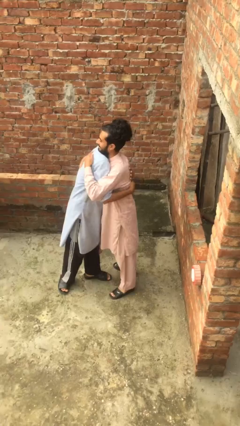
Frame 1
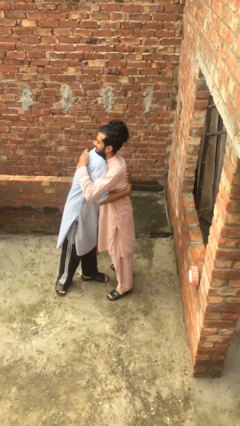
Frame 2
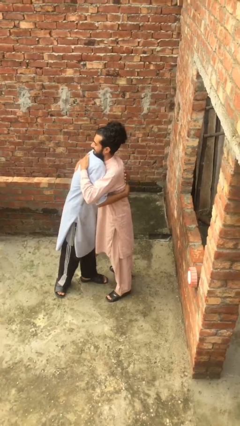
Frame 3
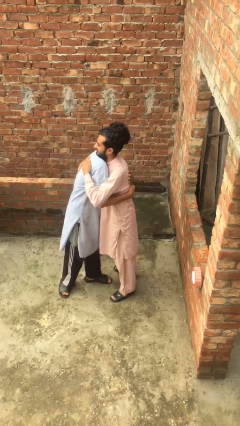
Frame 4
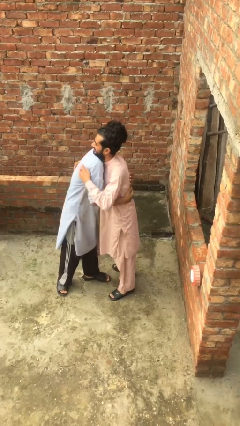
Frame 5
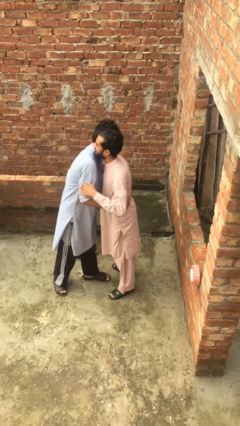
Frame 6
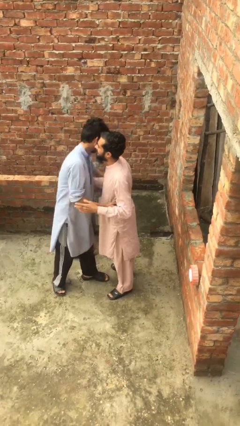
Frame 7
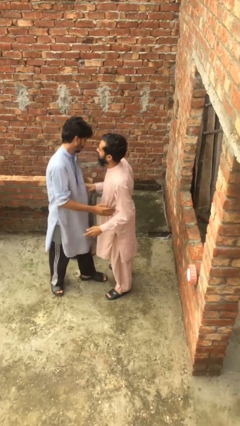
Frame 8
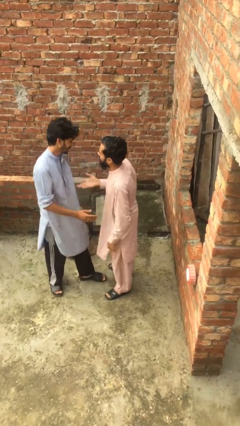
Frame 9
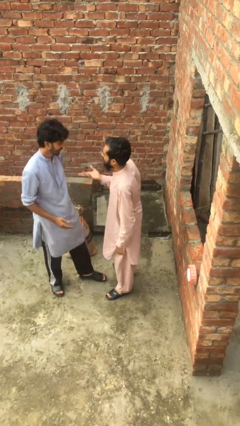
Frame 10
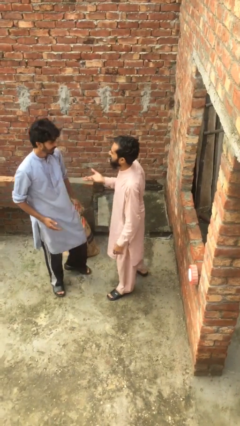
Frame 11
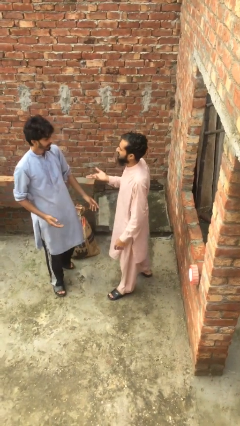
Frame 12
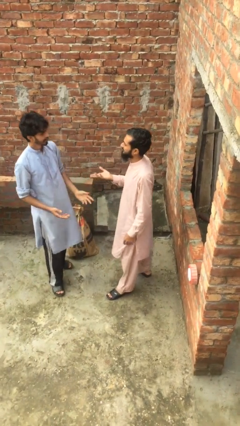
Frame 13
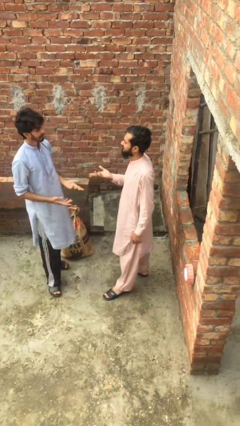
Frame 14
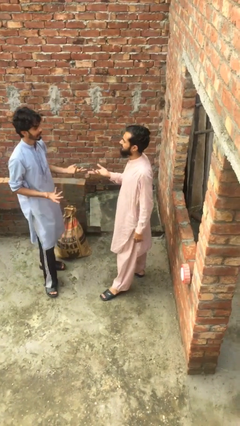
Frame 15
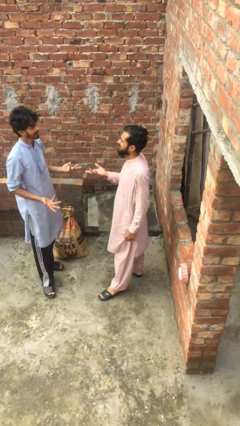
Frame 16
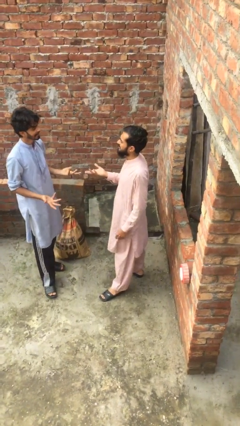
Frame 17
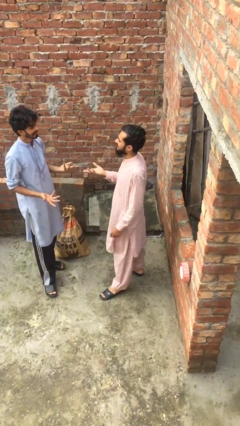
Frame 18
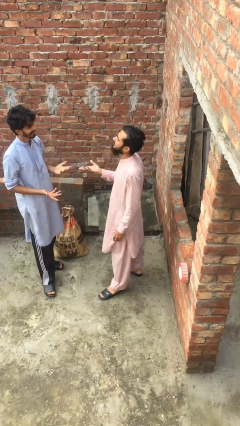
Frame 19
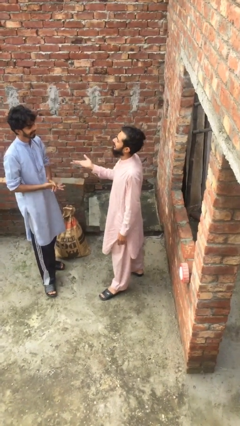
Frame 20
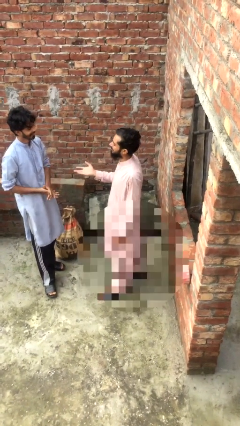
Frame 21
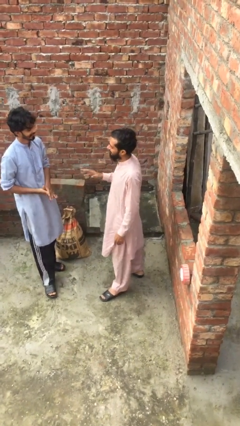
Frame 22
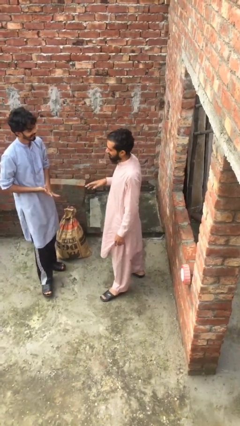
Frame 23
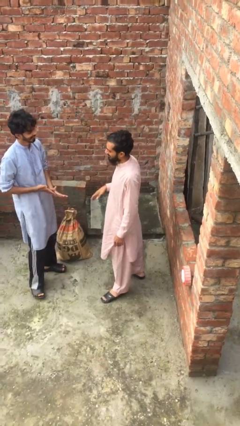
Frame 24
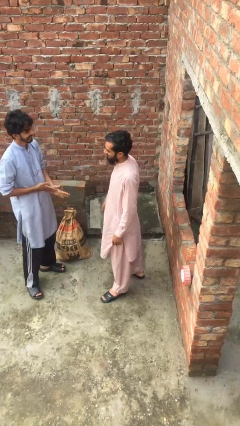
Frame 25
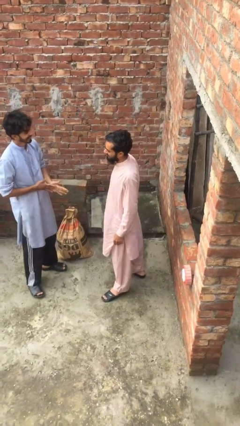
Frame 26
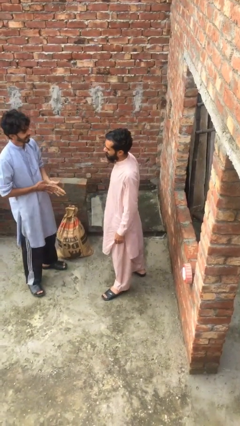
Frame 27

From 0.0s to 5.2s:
person talks to person

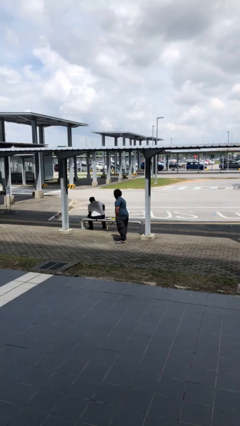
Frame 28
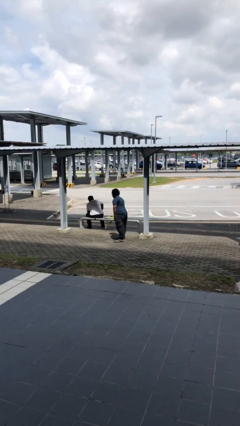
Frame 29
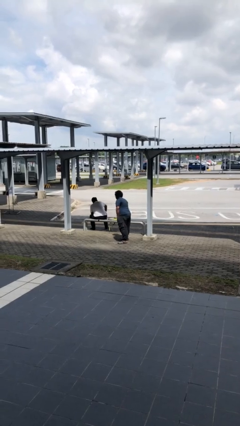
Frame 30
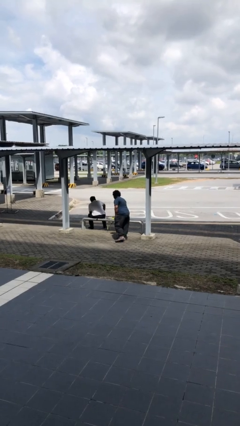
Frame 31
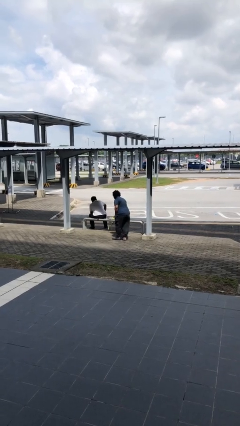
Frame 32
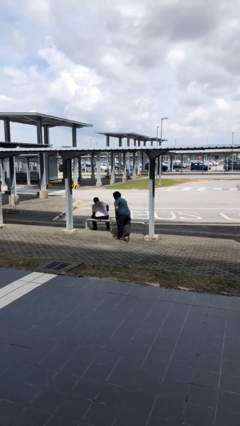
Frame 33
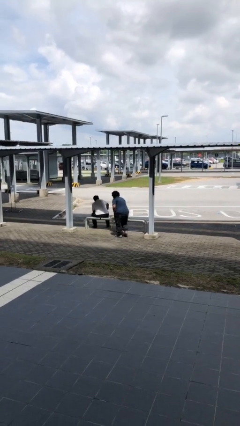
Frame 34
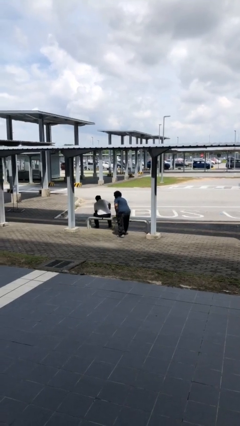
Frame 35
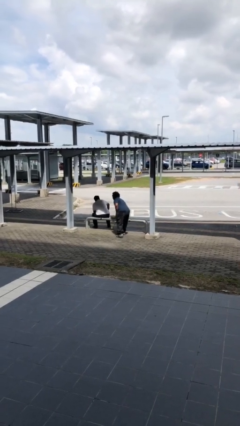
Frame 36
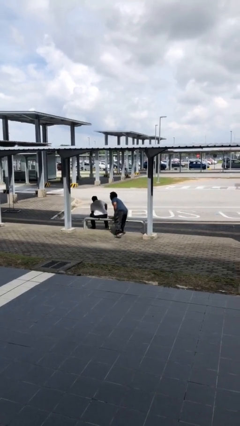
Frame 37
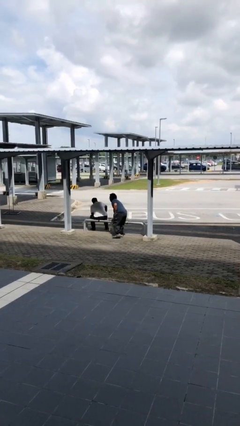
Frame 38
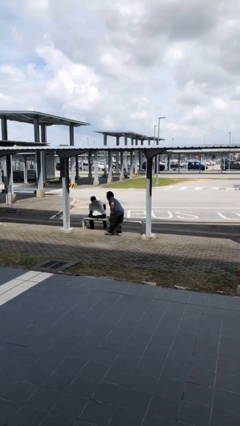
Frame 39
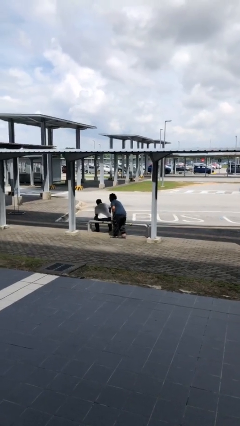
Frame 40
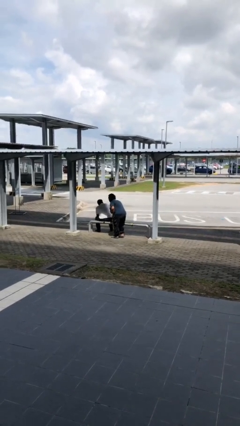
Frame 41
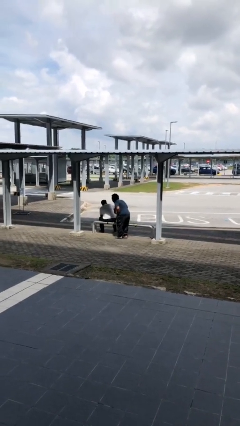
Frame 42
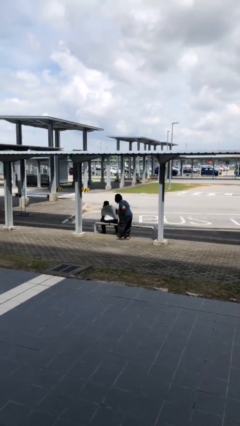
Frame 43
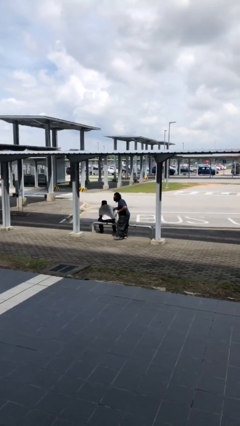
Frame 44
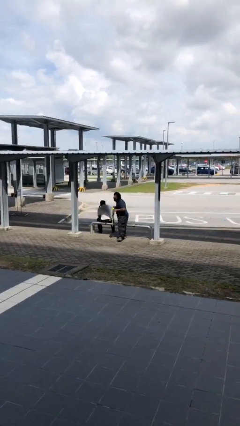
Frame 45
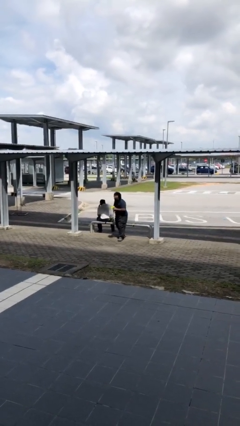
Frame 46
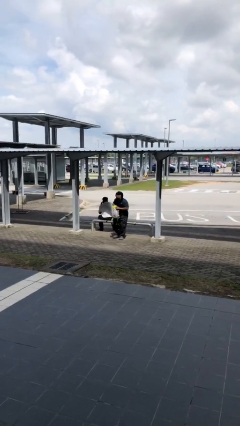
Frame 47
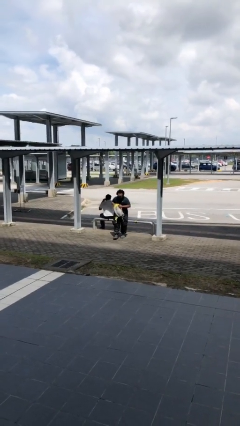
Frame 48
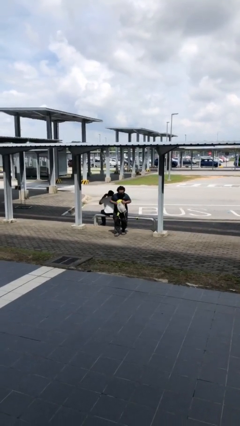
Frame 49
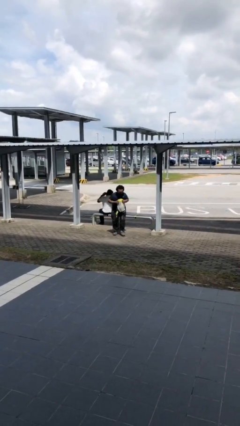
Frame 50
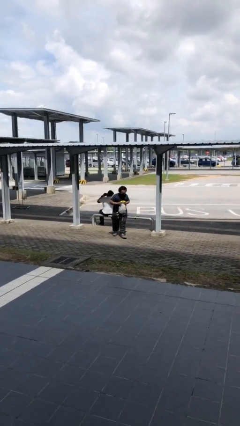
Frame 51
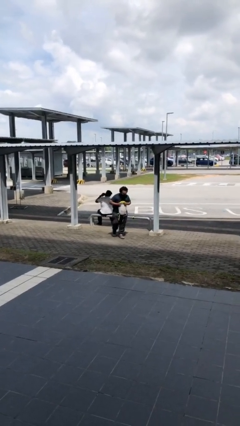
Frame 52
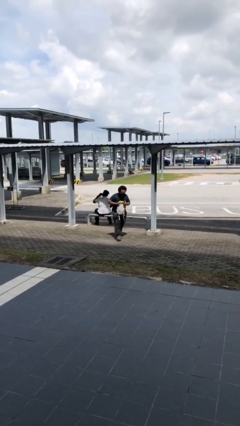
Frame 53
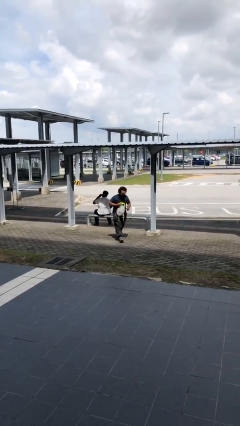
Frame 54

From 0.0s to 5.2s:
person steals object from person

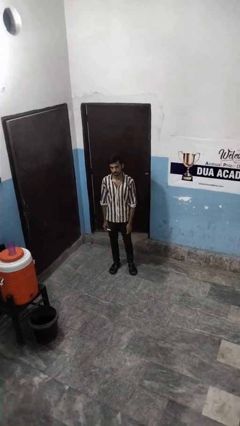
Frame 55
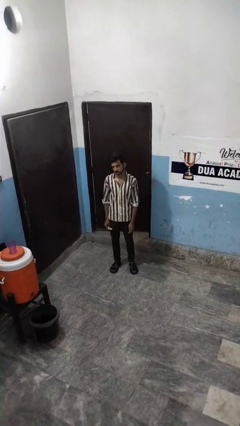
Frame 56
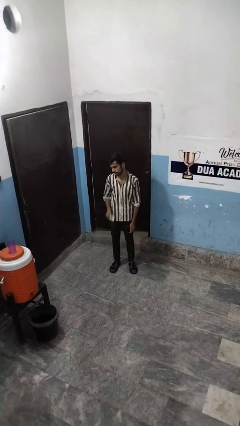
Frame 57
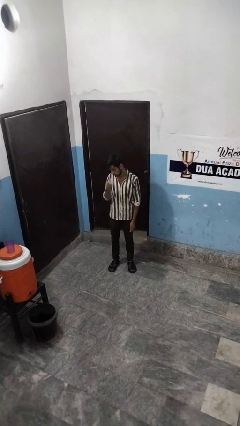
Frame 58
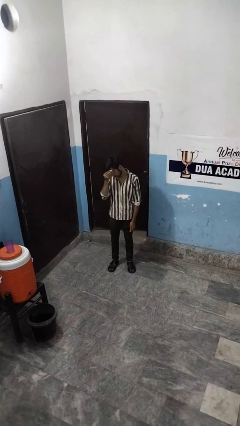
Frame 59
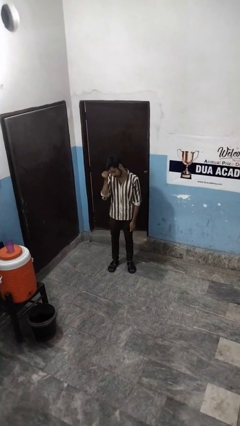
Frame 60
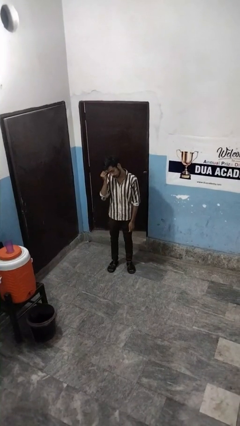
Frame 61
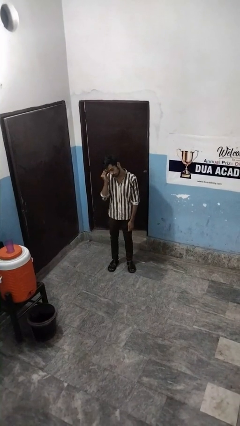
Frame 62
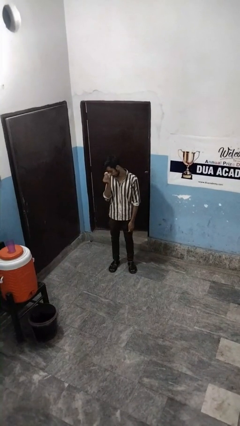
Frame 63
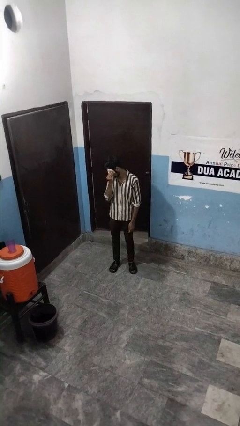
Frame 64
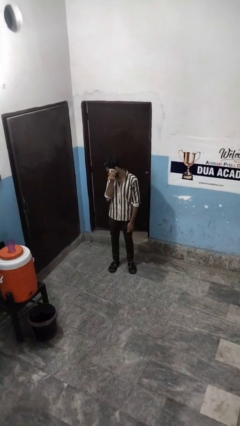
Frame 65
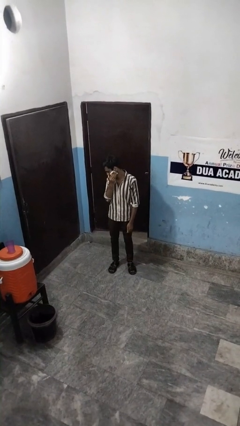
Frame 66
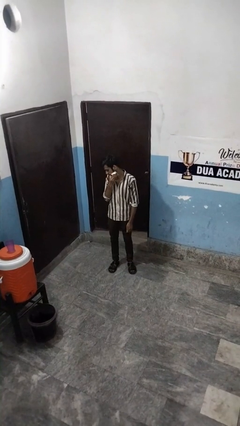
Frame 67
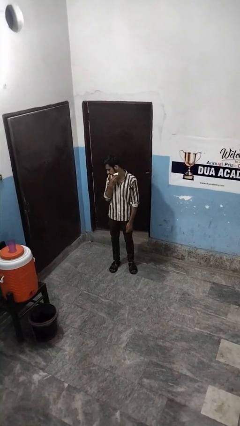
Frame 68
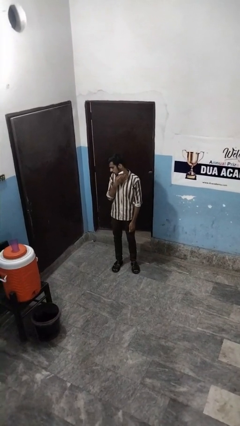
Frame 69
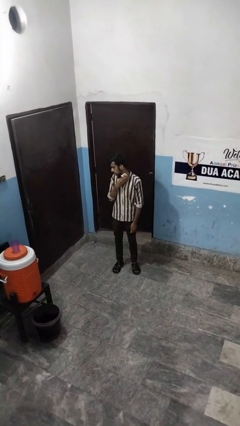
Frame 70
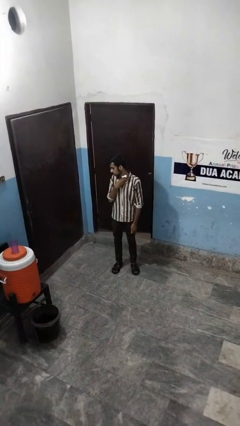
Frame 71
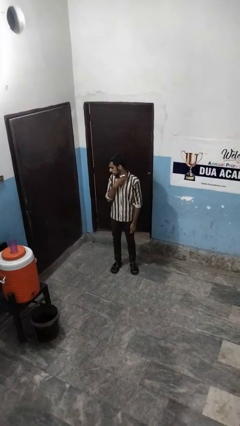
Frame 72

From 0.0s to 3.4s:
person wipes mouth with napkin

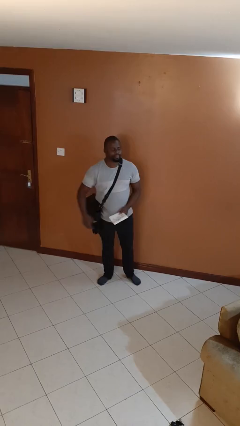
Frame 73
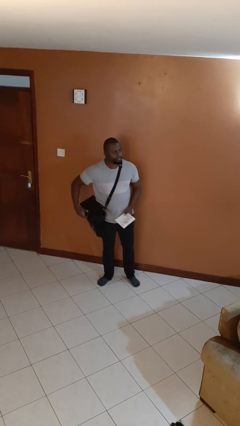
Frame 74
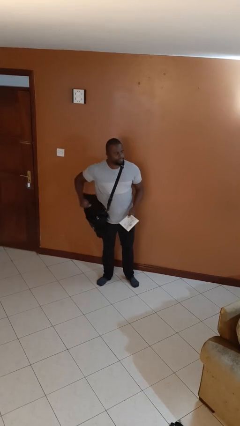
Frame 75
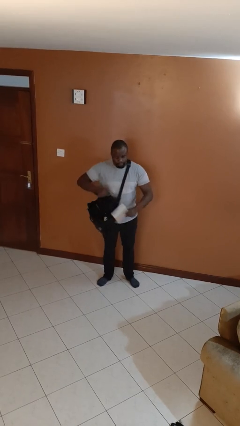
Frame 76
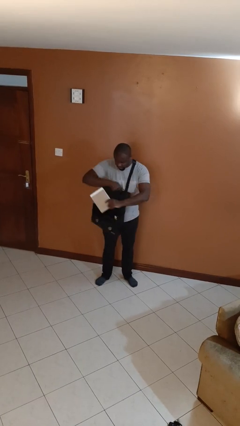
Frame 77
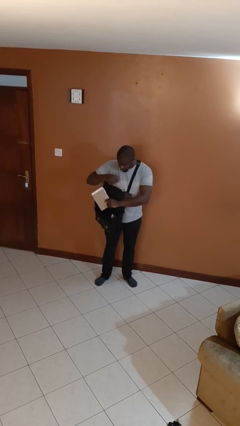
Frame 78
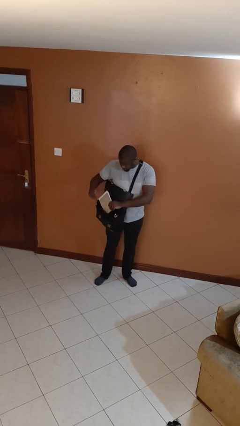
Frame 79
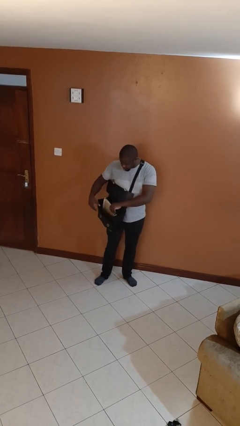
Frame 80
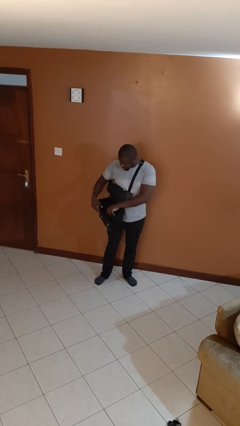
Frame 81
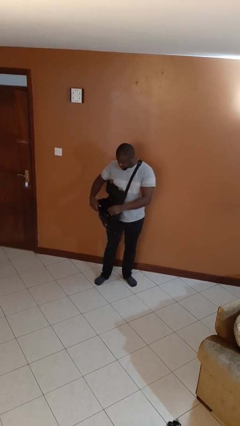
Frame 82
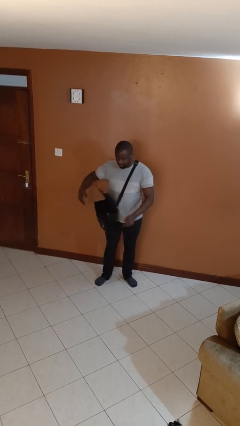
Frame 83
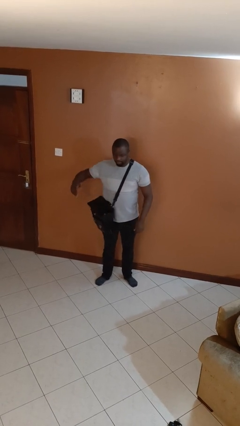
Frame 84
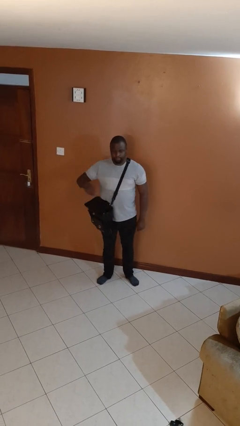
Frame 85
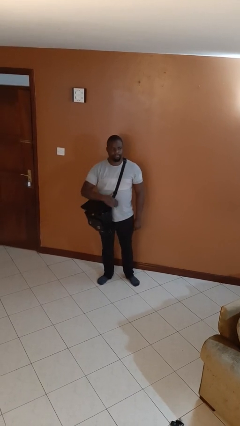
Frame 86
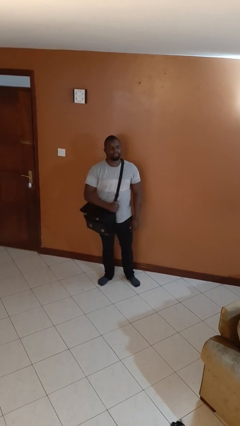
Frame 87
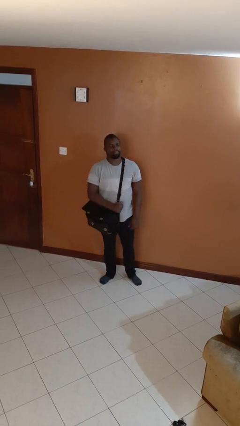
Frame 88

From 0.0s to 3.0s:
person puts object into purse

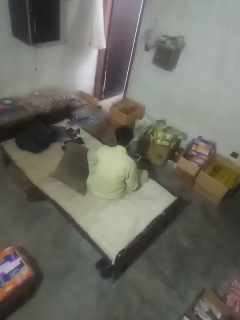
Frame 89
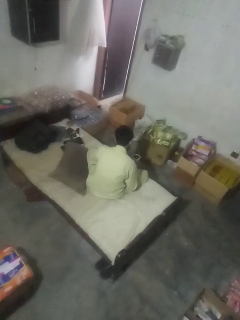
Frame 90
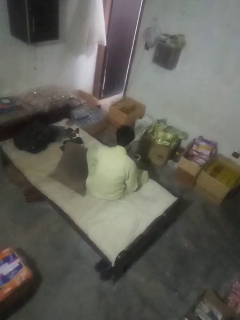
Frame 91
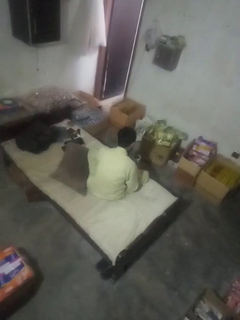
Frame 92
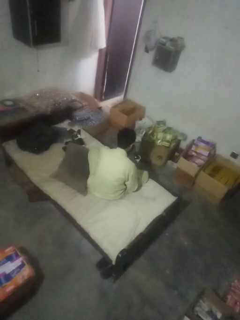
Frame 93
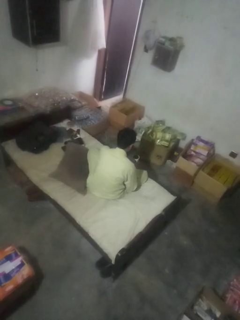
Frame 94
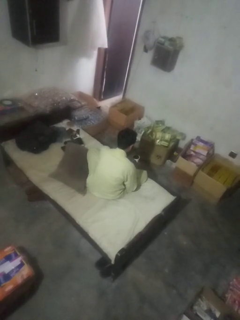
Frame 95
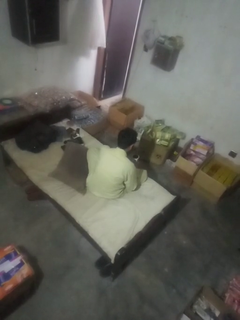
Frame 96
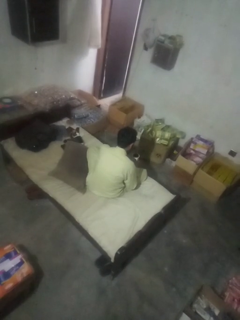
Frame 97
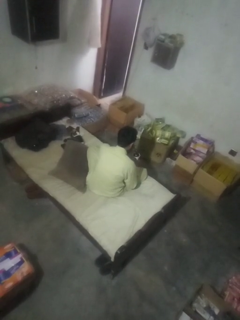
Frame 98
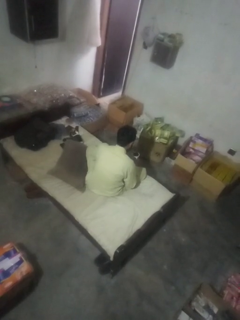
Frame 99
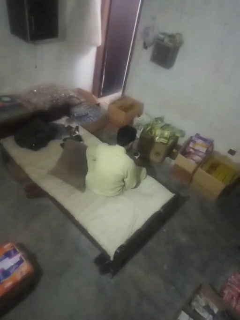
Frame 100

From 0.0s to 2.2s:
person stirs mug
